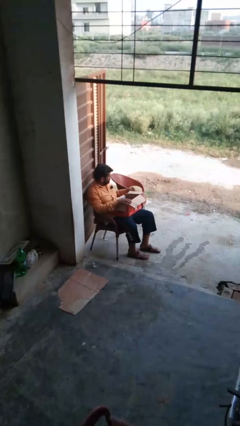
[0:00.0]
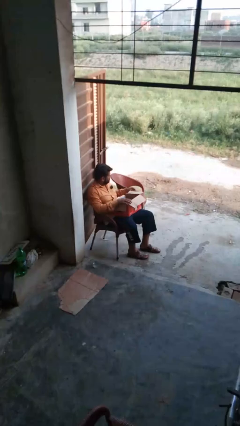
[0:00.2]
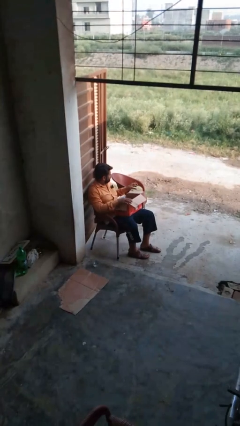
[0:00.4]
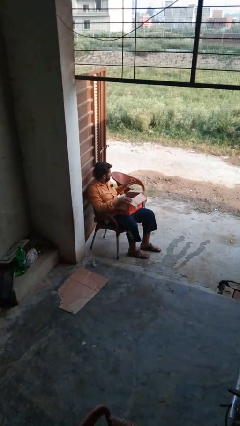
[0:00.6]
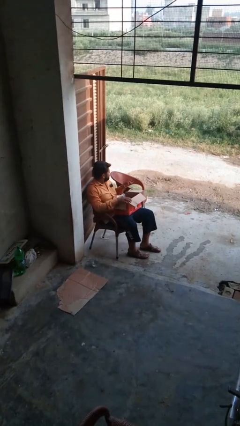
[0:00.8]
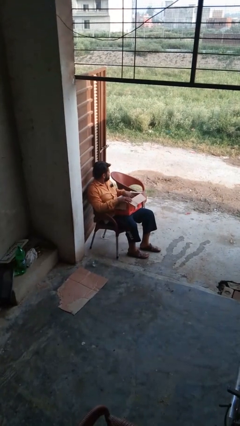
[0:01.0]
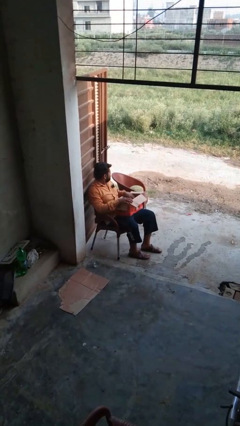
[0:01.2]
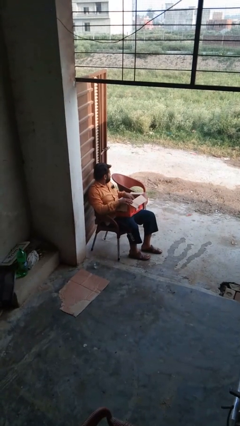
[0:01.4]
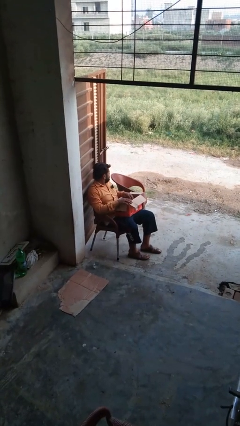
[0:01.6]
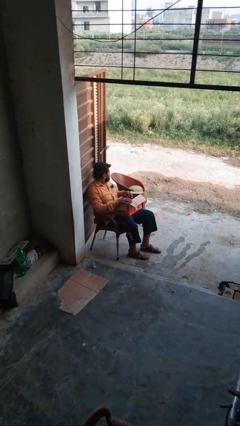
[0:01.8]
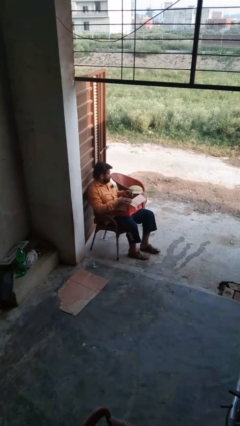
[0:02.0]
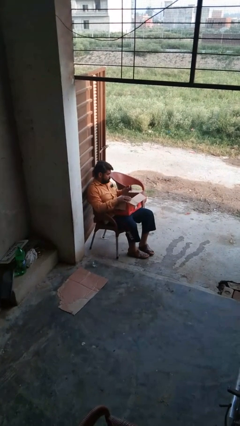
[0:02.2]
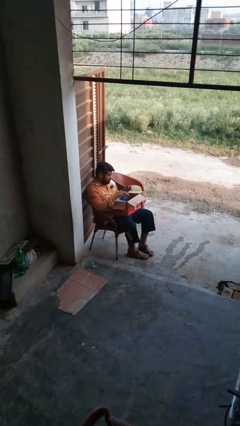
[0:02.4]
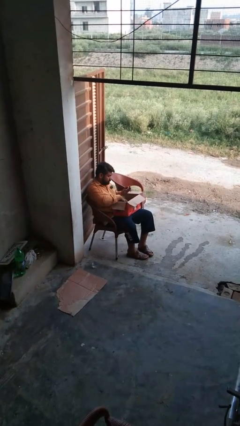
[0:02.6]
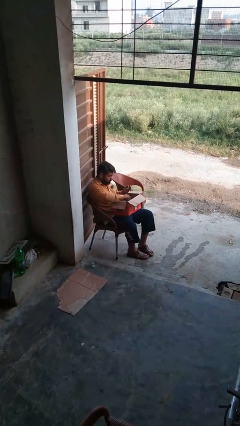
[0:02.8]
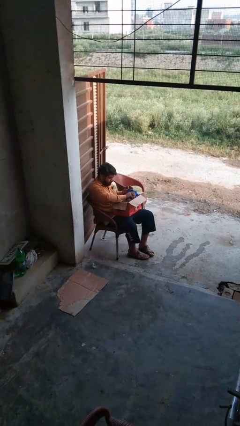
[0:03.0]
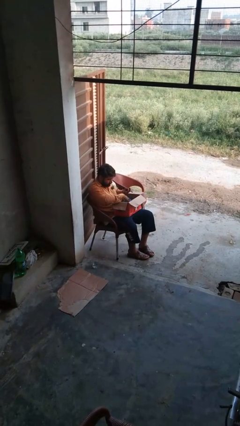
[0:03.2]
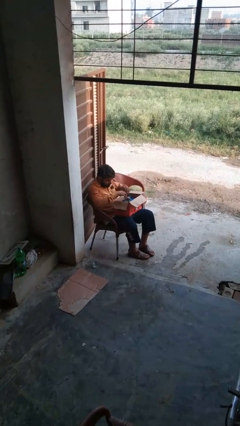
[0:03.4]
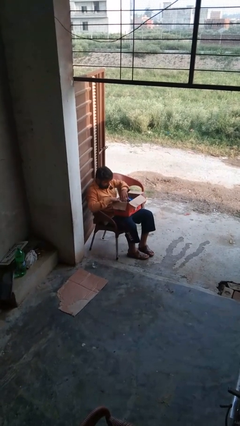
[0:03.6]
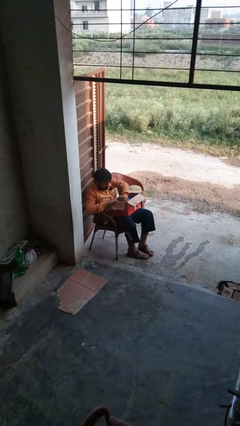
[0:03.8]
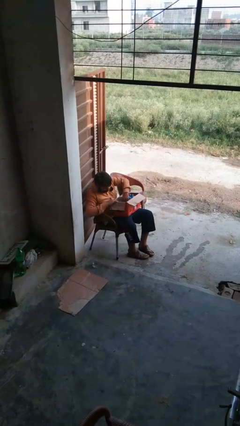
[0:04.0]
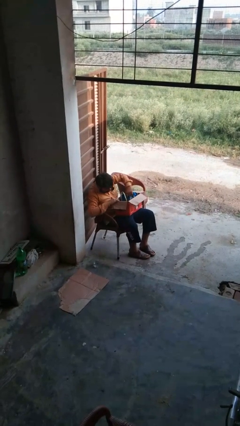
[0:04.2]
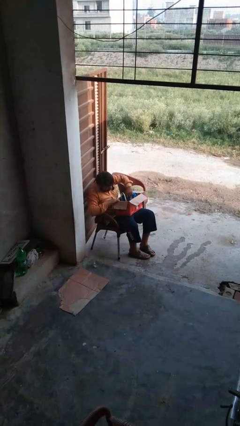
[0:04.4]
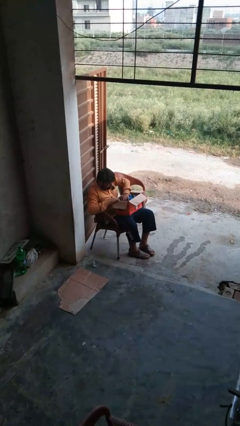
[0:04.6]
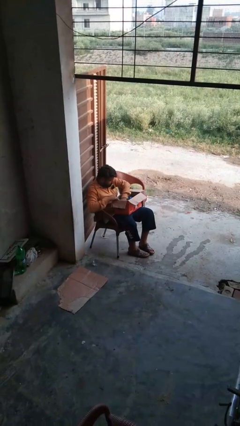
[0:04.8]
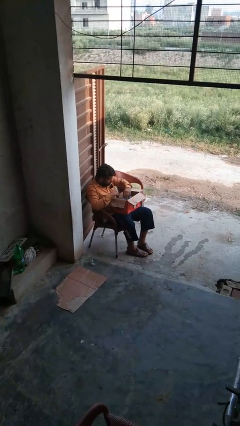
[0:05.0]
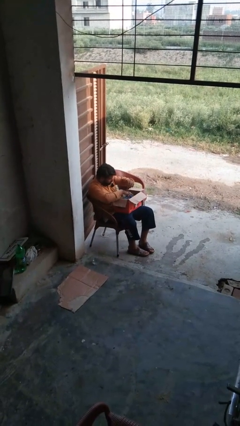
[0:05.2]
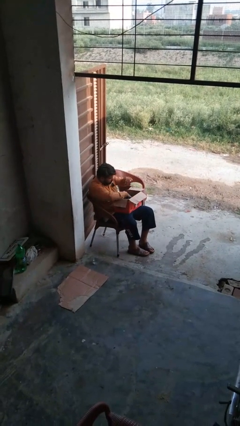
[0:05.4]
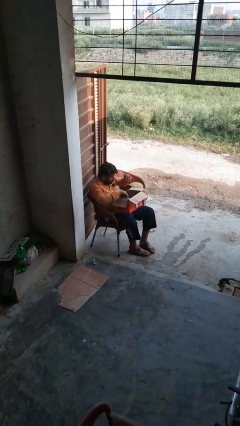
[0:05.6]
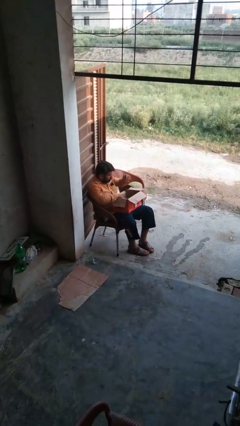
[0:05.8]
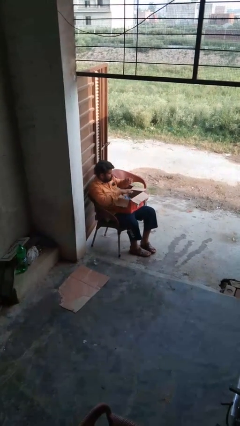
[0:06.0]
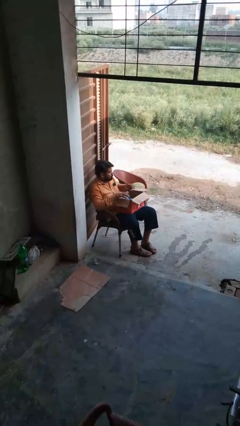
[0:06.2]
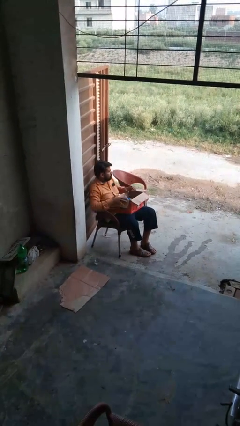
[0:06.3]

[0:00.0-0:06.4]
person searches in cabinet

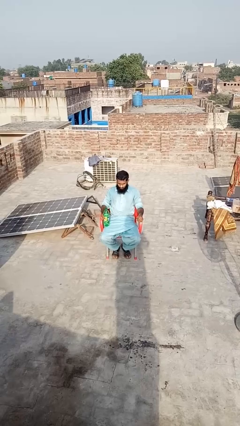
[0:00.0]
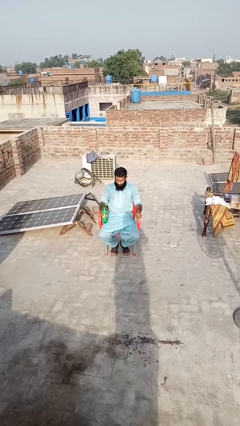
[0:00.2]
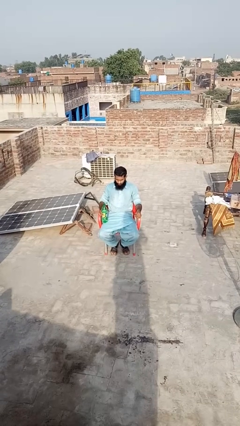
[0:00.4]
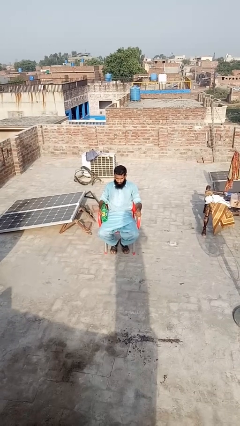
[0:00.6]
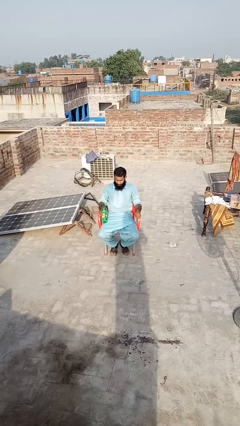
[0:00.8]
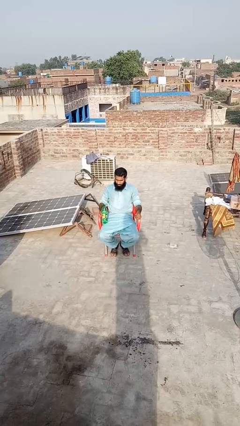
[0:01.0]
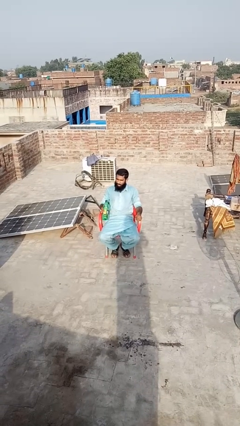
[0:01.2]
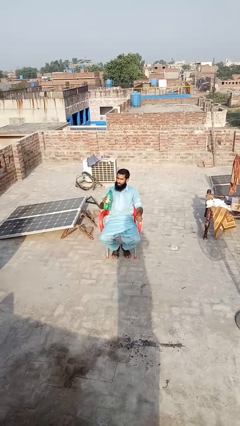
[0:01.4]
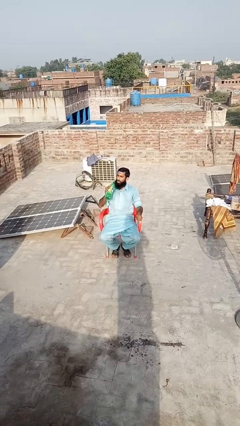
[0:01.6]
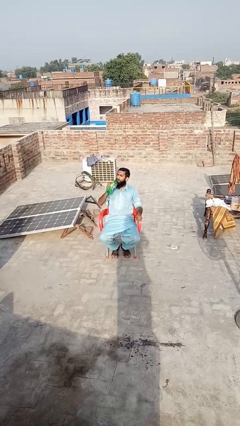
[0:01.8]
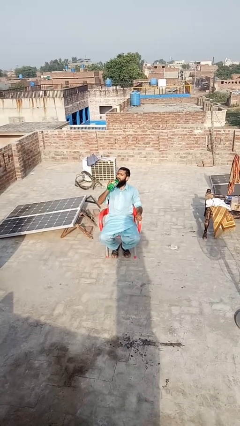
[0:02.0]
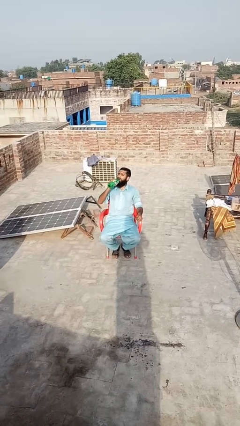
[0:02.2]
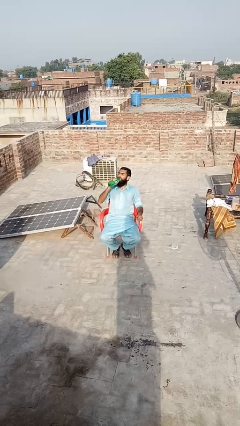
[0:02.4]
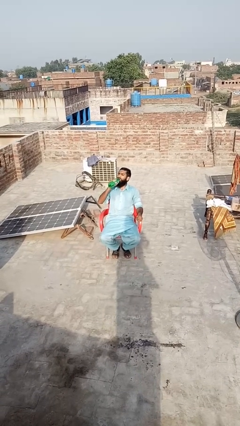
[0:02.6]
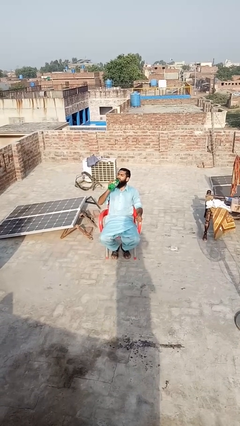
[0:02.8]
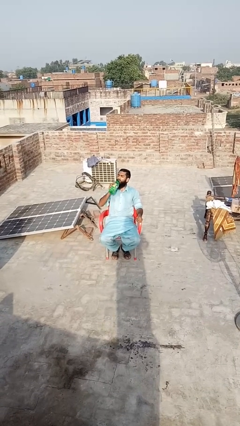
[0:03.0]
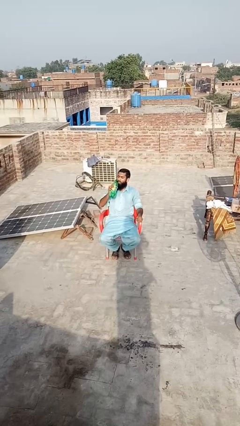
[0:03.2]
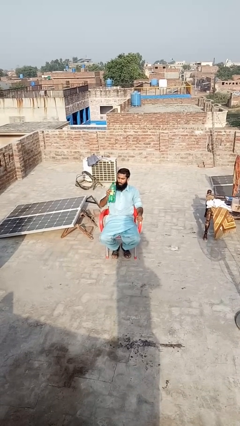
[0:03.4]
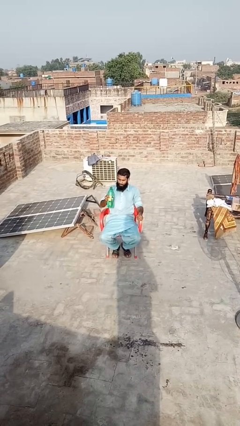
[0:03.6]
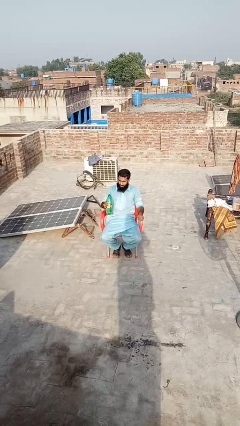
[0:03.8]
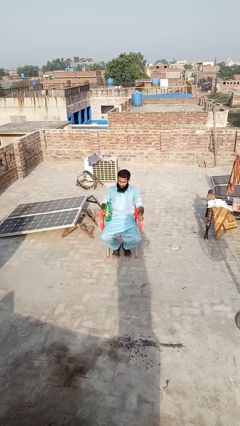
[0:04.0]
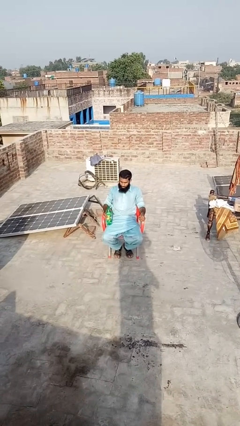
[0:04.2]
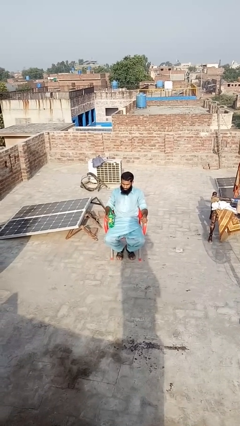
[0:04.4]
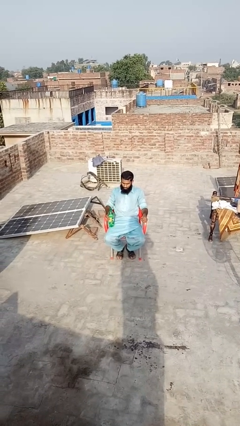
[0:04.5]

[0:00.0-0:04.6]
person drinks from bottle

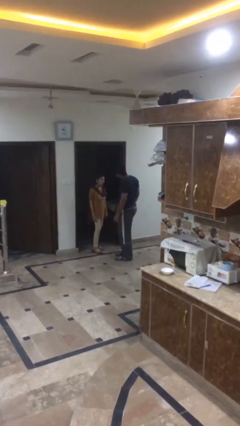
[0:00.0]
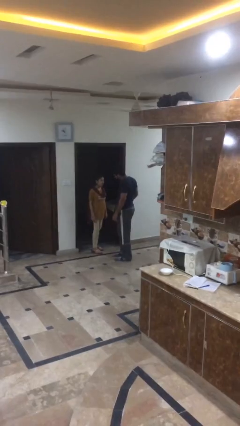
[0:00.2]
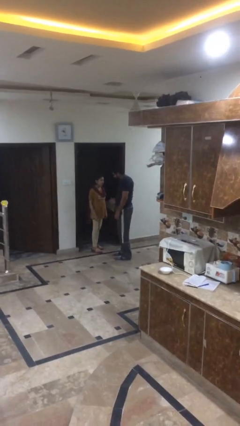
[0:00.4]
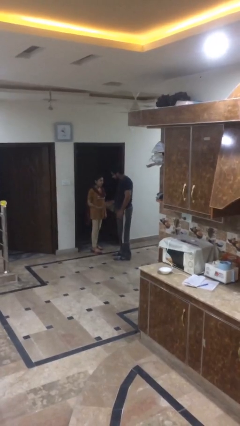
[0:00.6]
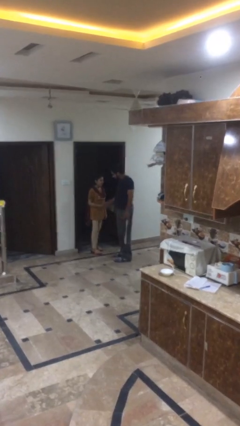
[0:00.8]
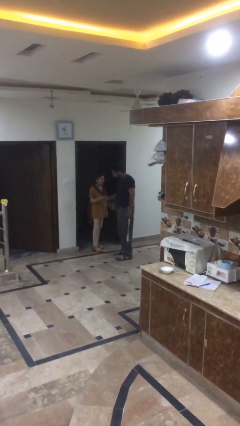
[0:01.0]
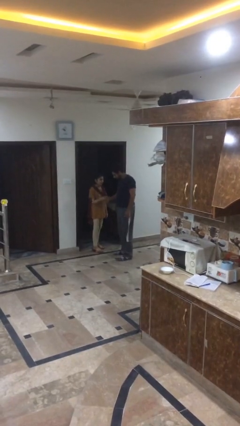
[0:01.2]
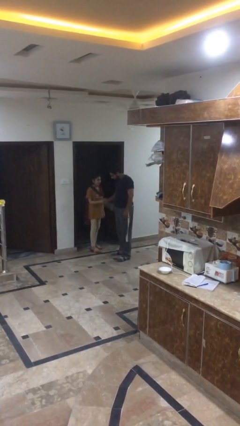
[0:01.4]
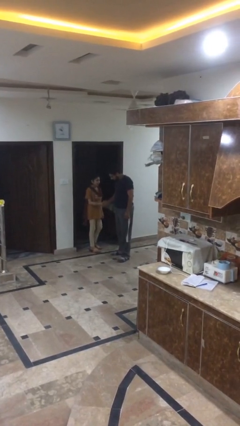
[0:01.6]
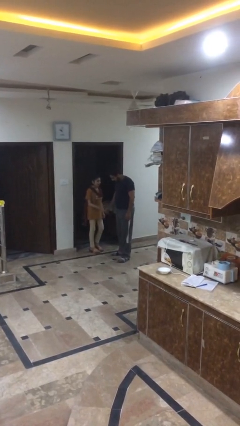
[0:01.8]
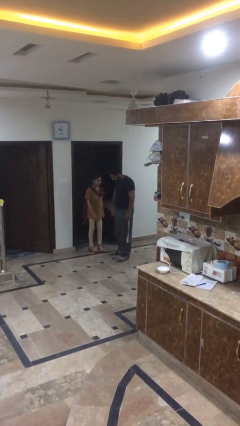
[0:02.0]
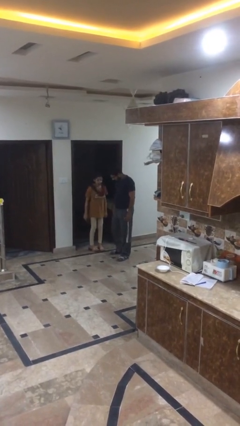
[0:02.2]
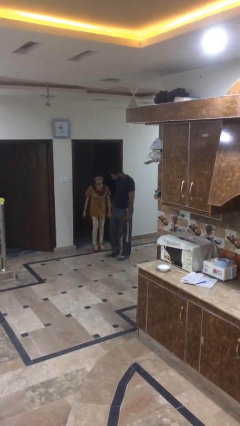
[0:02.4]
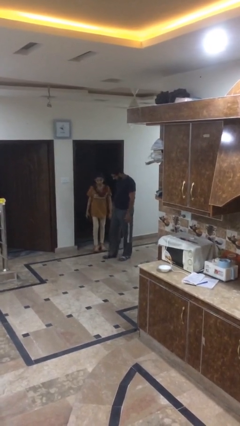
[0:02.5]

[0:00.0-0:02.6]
person shakes hand

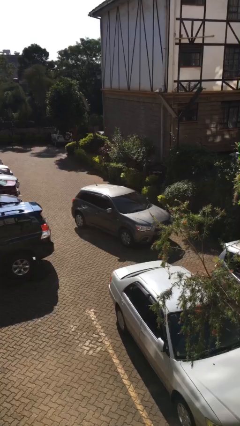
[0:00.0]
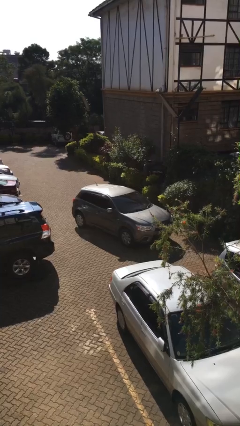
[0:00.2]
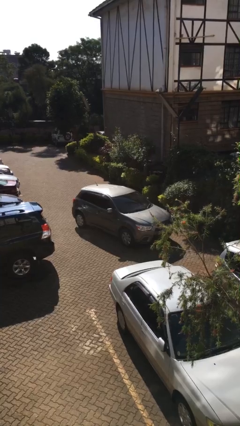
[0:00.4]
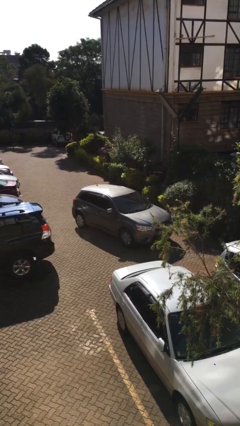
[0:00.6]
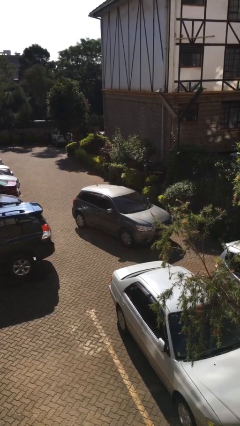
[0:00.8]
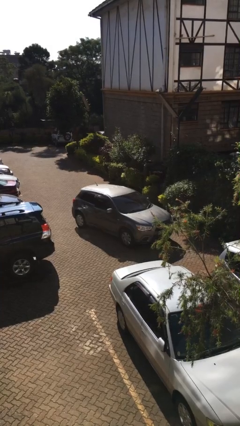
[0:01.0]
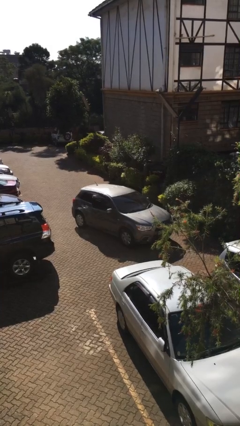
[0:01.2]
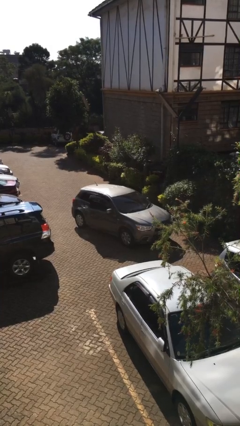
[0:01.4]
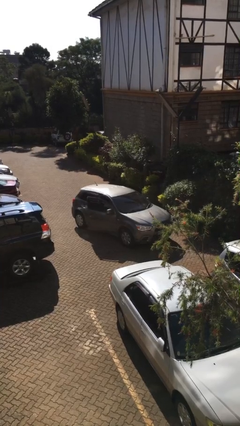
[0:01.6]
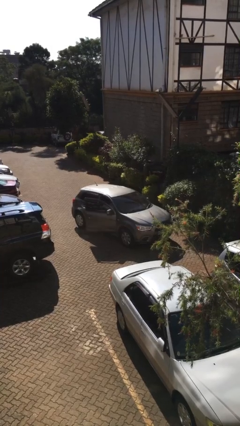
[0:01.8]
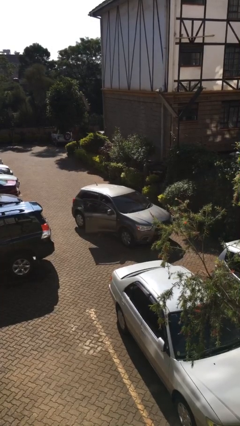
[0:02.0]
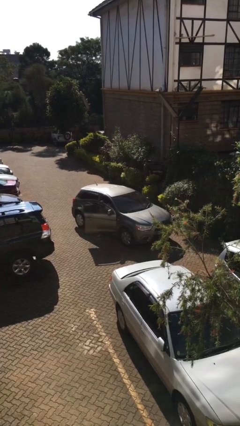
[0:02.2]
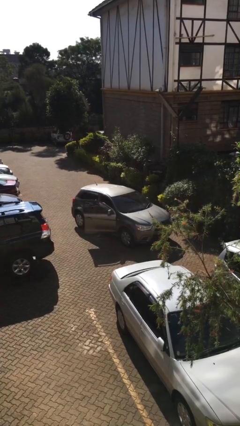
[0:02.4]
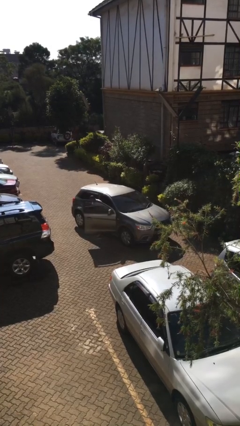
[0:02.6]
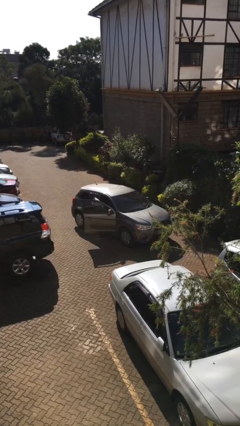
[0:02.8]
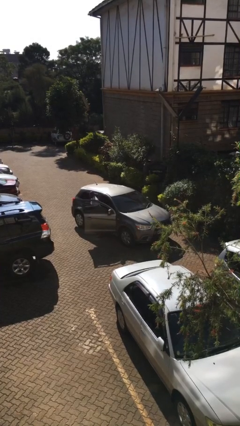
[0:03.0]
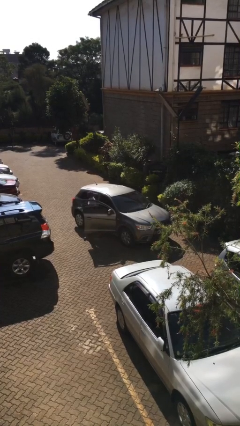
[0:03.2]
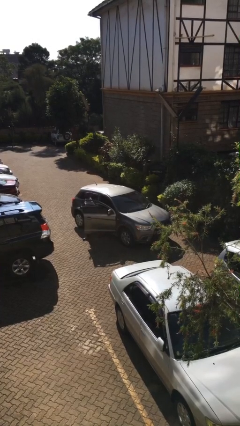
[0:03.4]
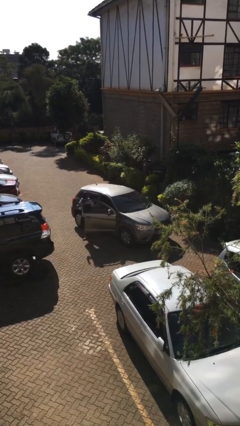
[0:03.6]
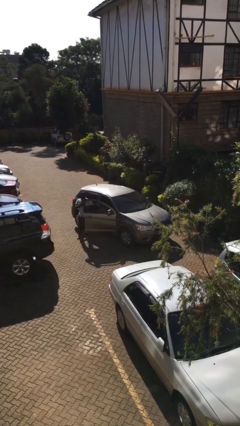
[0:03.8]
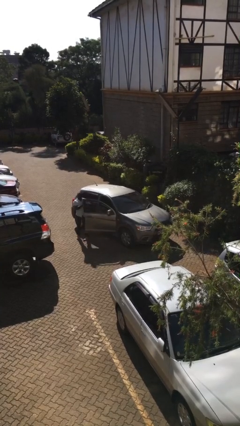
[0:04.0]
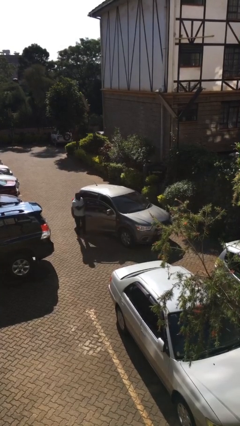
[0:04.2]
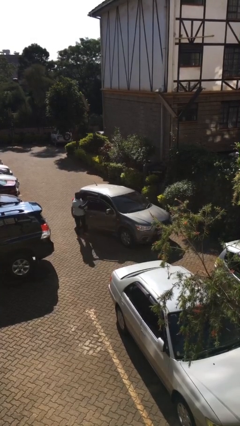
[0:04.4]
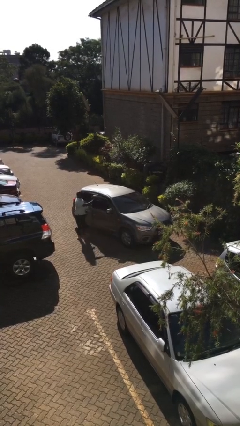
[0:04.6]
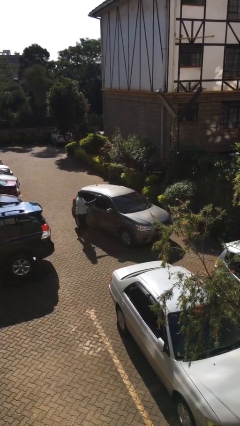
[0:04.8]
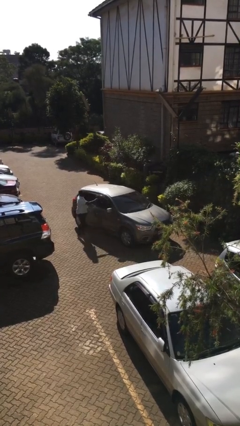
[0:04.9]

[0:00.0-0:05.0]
car drops off person
